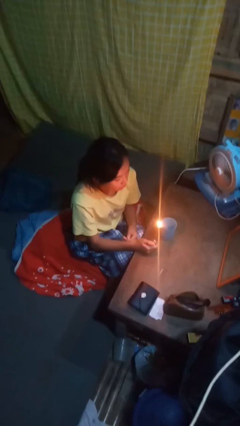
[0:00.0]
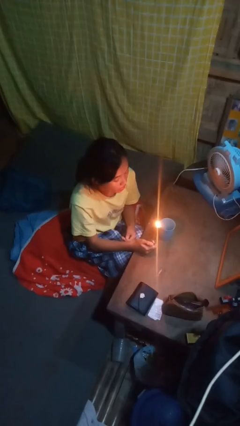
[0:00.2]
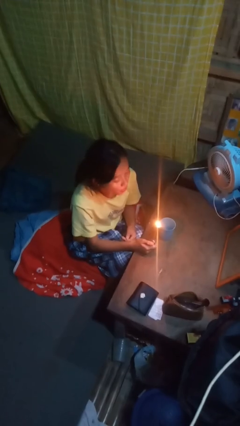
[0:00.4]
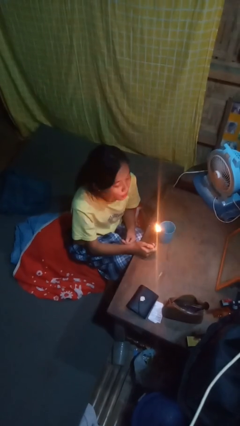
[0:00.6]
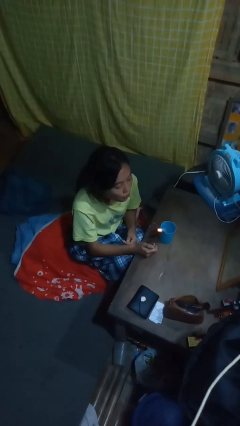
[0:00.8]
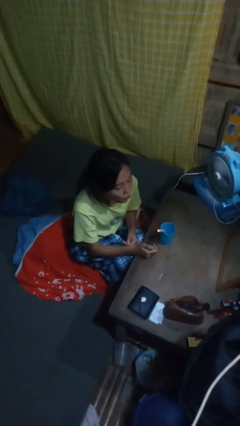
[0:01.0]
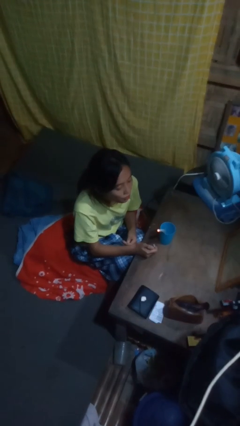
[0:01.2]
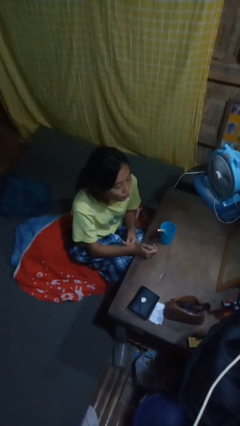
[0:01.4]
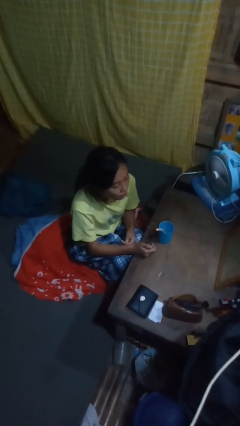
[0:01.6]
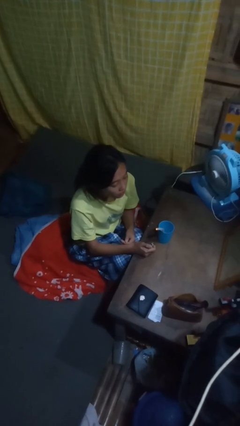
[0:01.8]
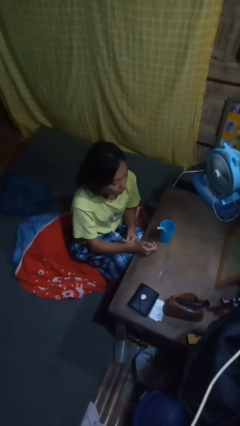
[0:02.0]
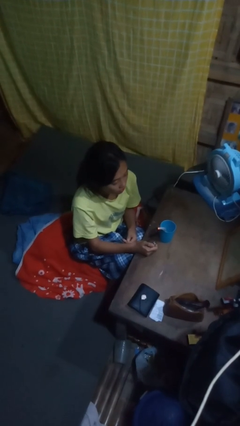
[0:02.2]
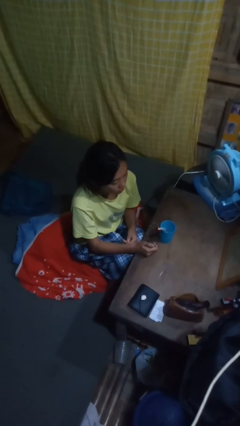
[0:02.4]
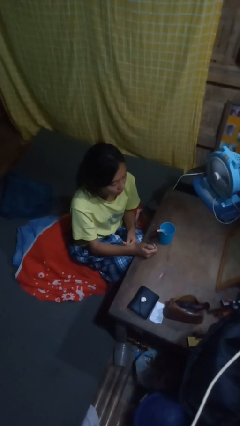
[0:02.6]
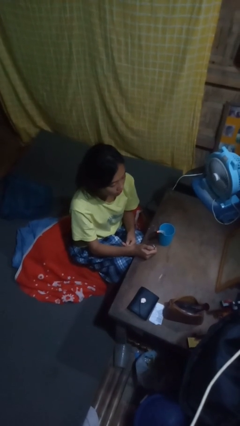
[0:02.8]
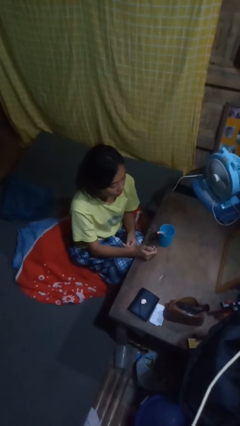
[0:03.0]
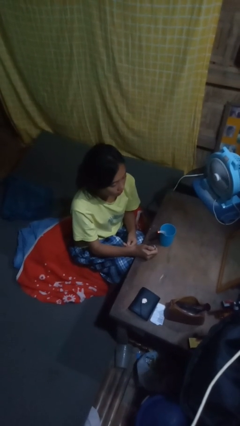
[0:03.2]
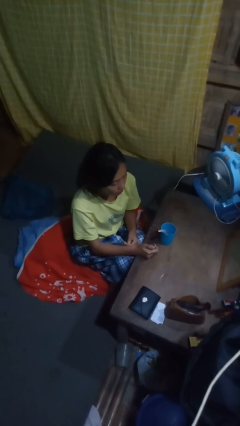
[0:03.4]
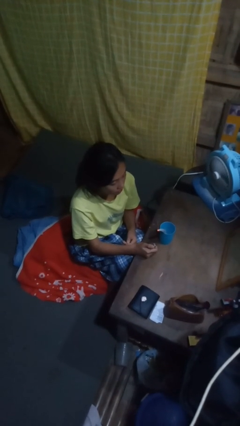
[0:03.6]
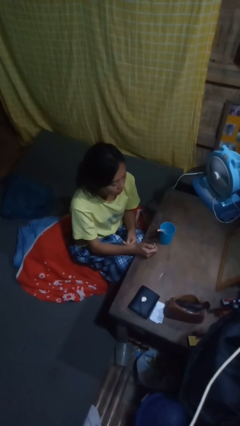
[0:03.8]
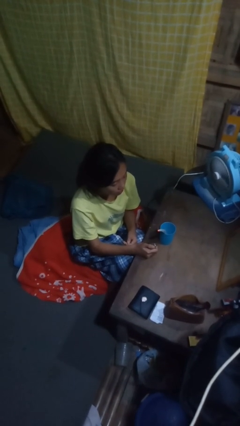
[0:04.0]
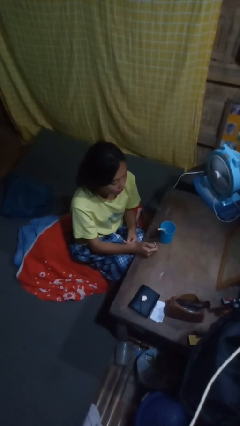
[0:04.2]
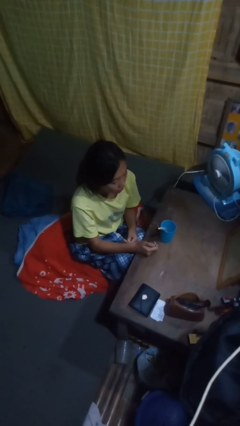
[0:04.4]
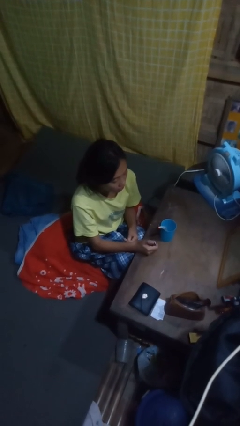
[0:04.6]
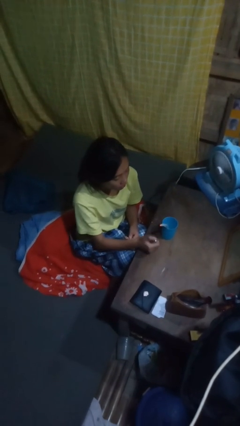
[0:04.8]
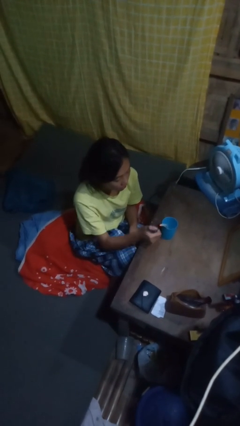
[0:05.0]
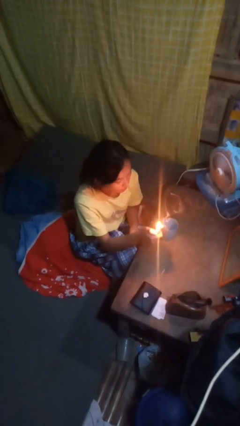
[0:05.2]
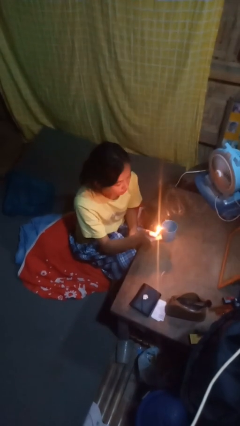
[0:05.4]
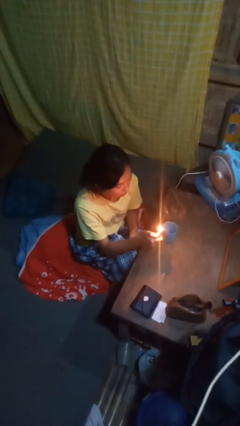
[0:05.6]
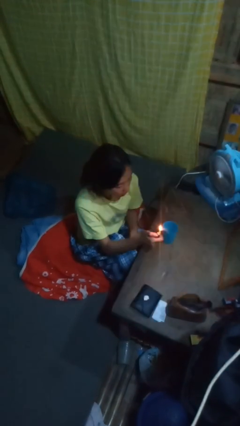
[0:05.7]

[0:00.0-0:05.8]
person extinguishes candle

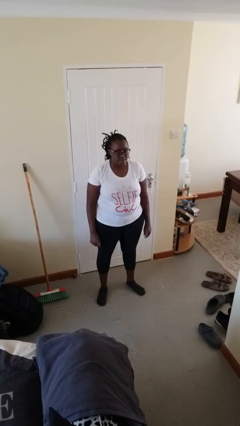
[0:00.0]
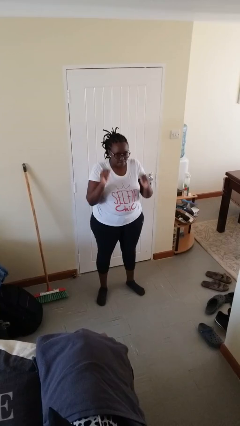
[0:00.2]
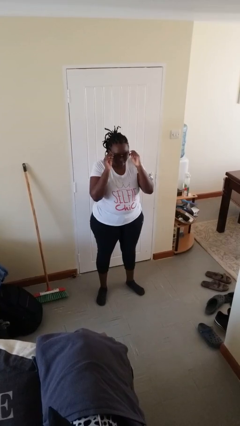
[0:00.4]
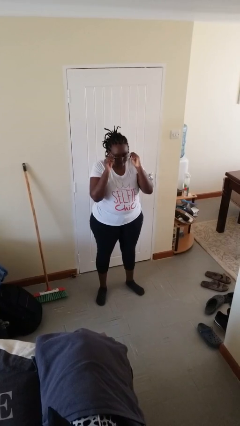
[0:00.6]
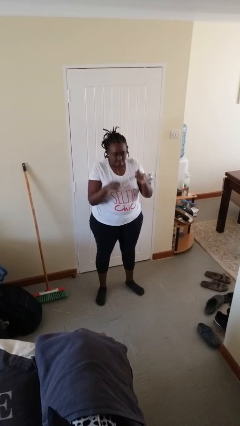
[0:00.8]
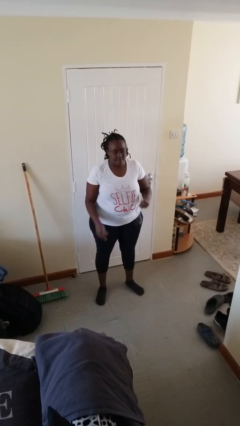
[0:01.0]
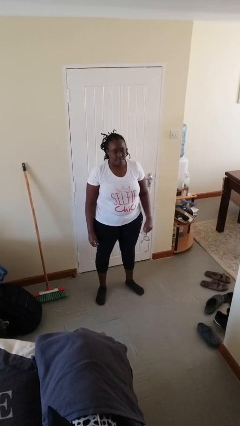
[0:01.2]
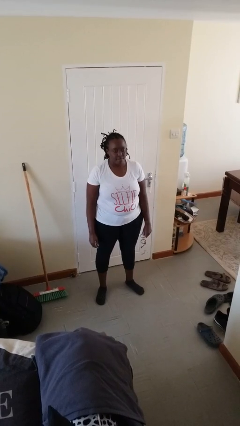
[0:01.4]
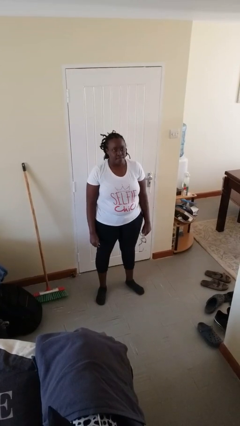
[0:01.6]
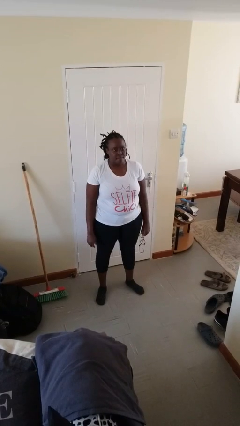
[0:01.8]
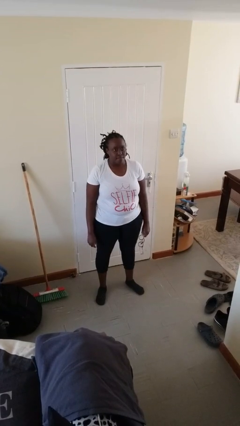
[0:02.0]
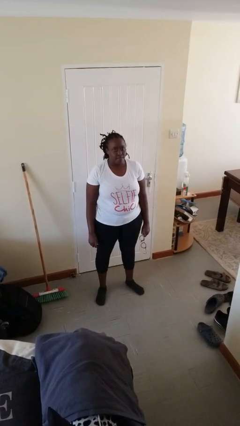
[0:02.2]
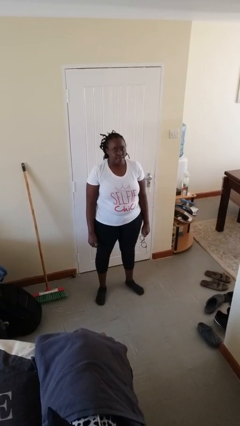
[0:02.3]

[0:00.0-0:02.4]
person takes off glasses

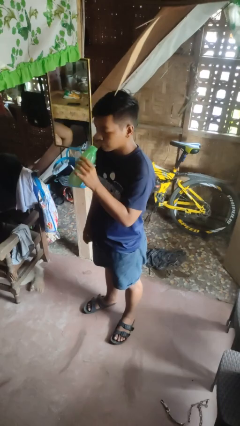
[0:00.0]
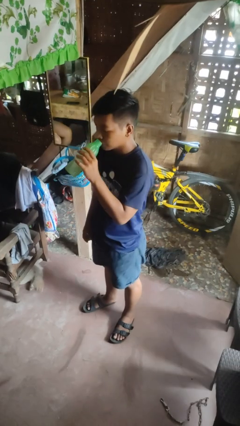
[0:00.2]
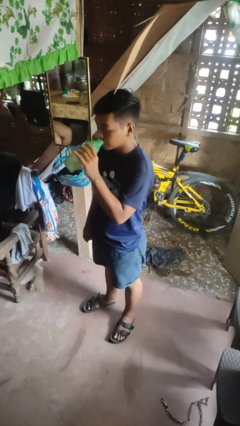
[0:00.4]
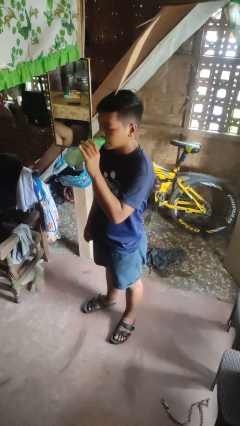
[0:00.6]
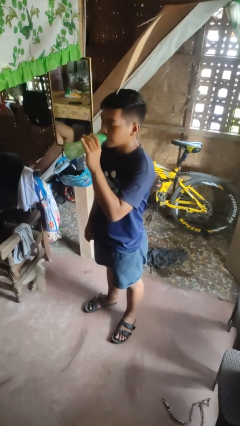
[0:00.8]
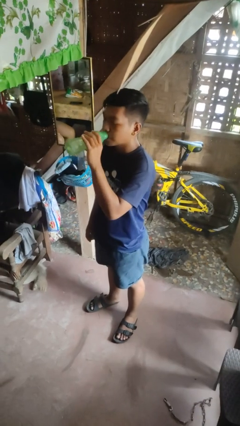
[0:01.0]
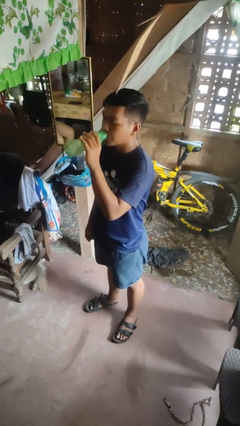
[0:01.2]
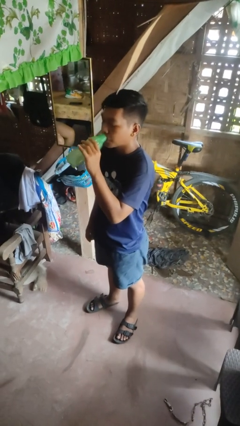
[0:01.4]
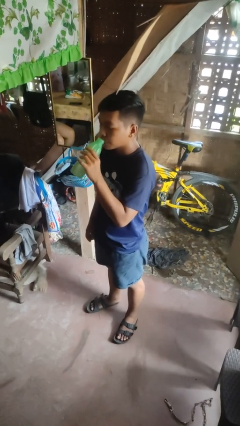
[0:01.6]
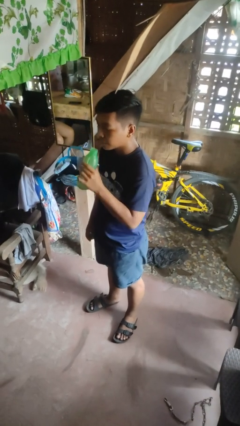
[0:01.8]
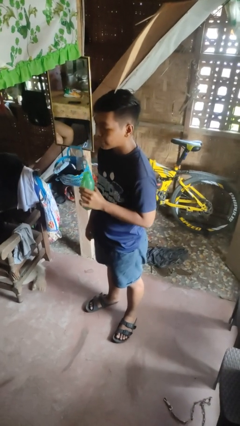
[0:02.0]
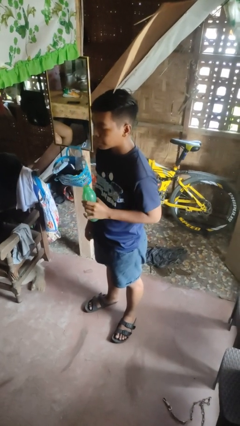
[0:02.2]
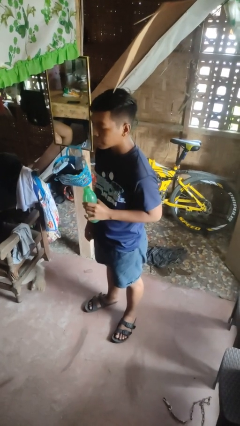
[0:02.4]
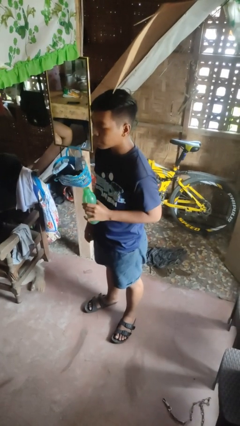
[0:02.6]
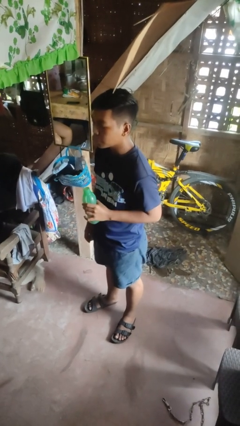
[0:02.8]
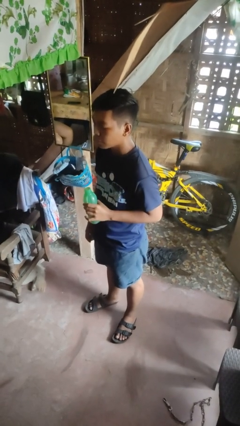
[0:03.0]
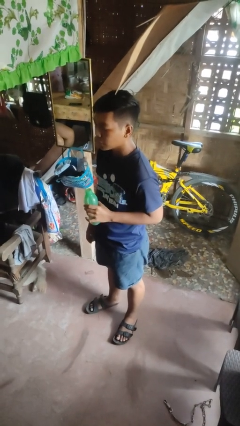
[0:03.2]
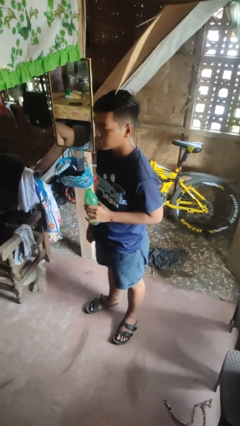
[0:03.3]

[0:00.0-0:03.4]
person drinks from bottle

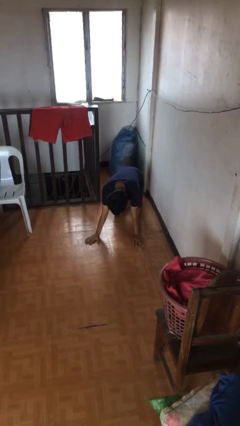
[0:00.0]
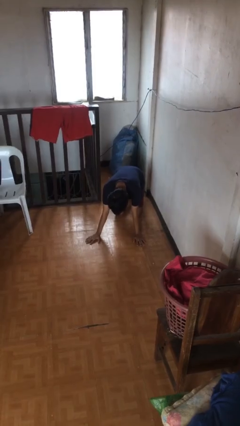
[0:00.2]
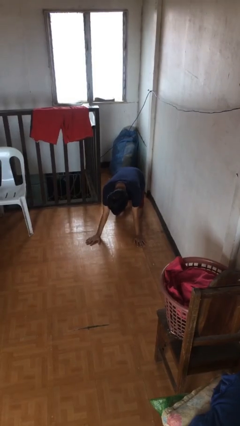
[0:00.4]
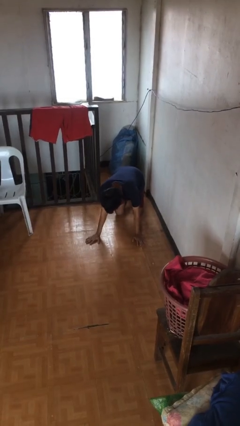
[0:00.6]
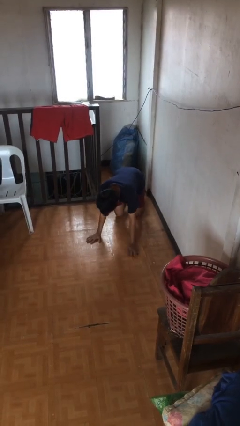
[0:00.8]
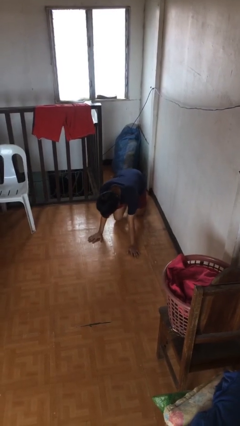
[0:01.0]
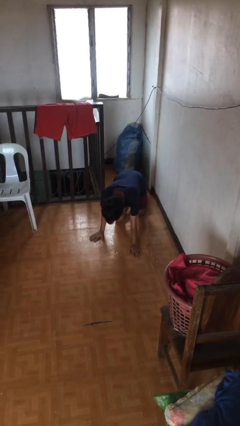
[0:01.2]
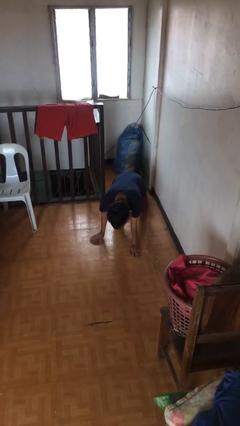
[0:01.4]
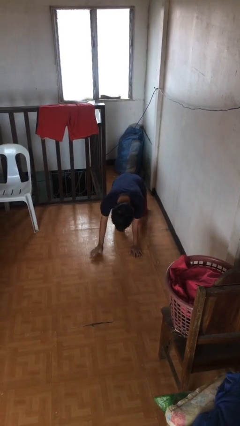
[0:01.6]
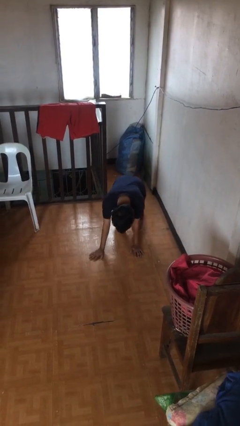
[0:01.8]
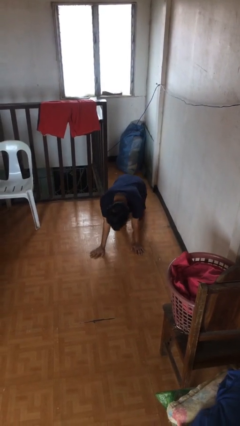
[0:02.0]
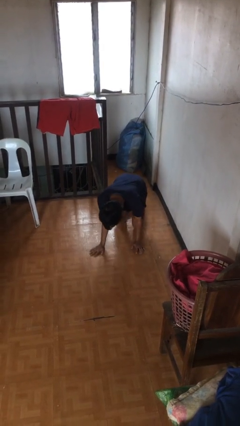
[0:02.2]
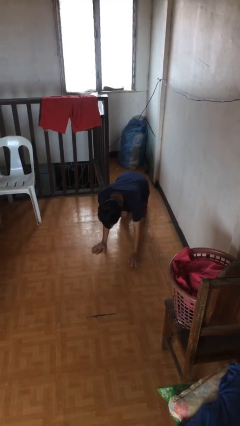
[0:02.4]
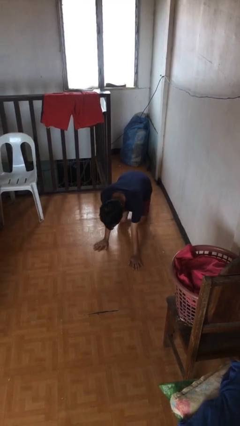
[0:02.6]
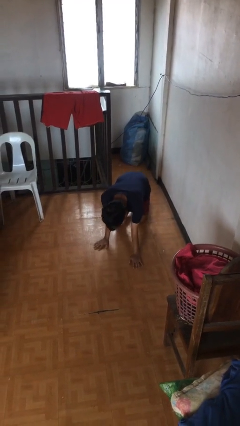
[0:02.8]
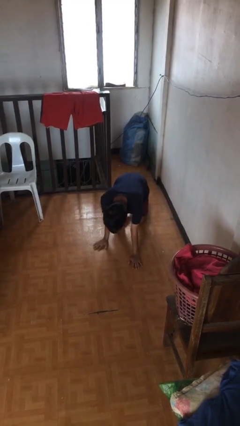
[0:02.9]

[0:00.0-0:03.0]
person crawls

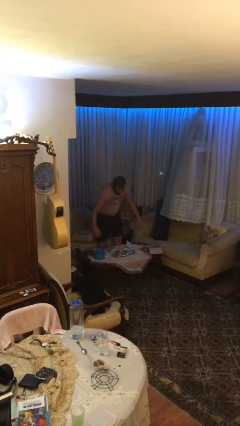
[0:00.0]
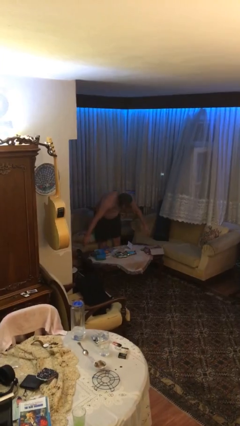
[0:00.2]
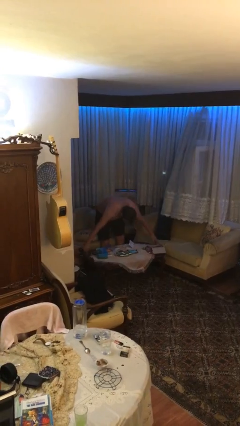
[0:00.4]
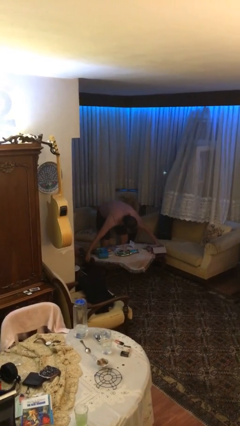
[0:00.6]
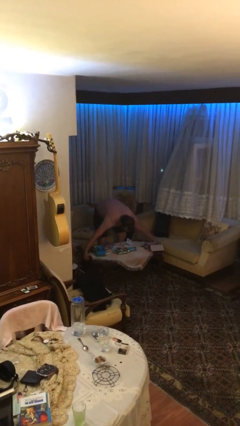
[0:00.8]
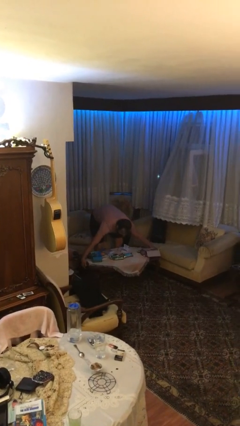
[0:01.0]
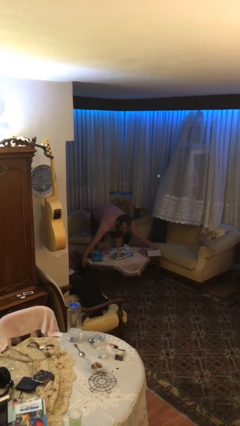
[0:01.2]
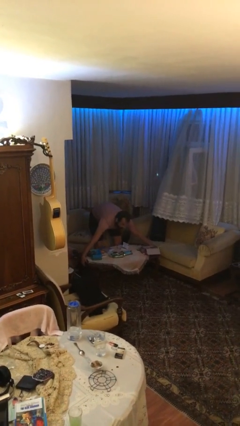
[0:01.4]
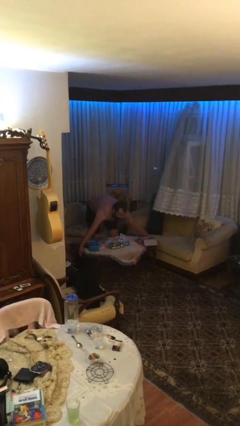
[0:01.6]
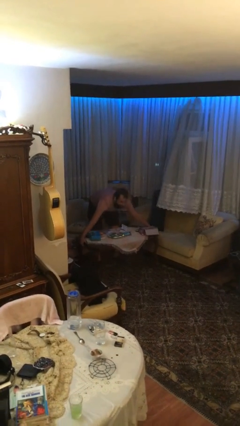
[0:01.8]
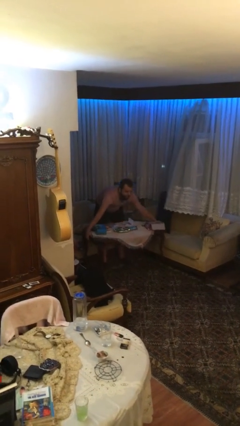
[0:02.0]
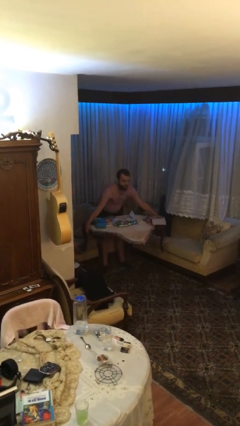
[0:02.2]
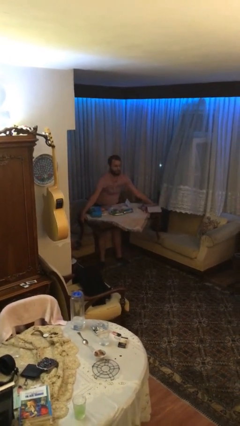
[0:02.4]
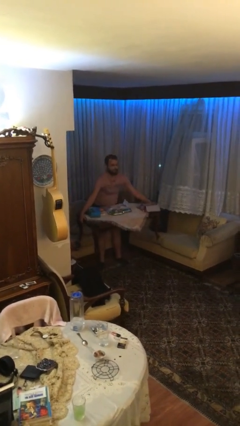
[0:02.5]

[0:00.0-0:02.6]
person picks up object from floor

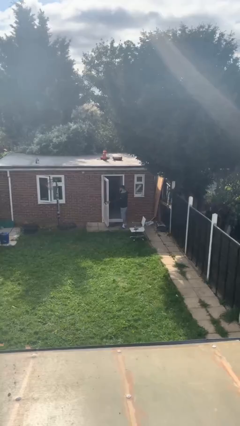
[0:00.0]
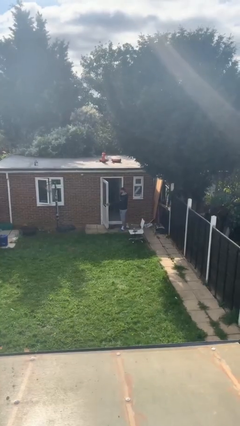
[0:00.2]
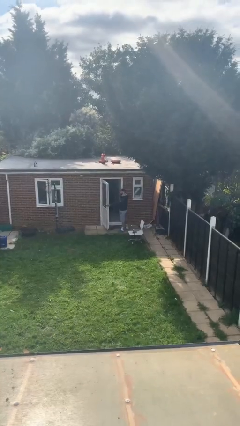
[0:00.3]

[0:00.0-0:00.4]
person closes facility door
